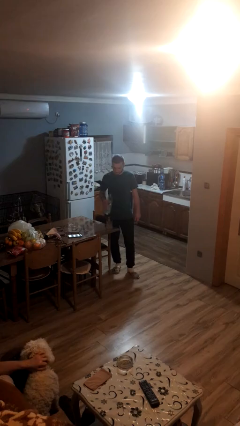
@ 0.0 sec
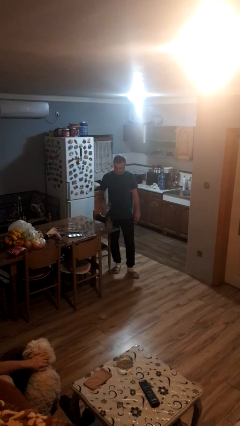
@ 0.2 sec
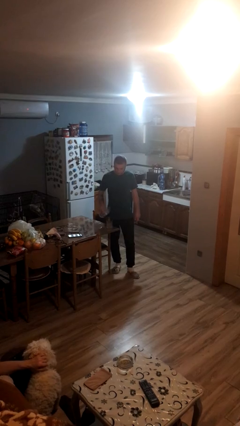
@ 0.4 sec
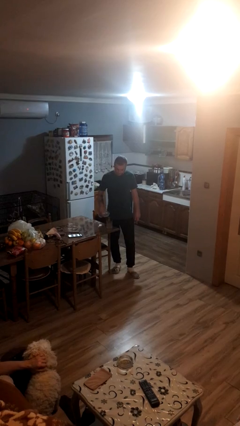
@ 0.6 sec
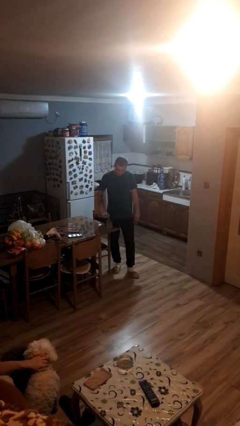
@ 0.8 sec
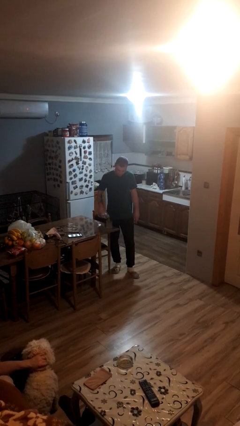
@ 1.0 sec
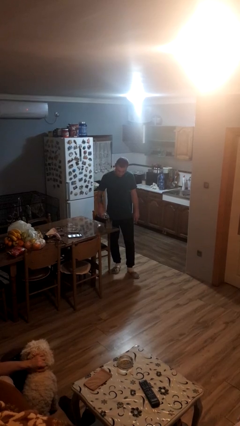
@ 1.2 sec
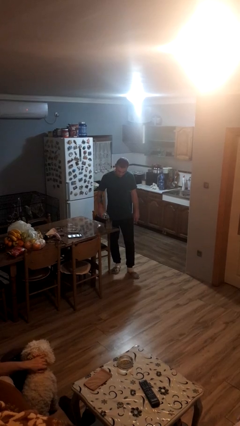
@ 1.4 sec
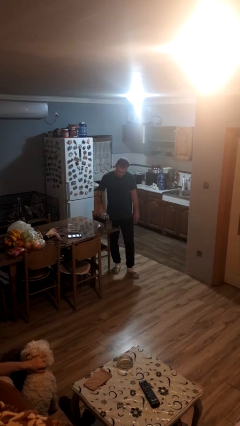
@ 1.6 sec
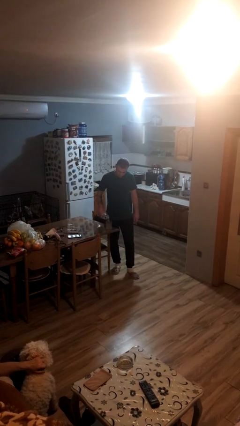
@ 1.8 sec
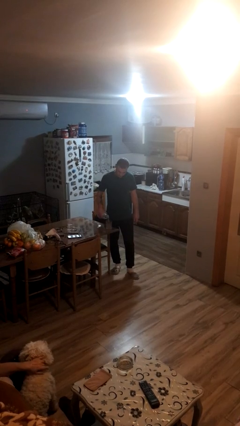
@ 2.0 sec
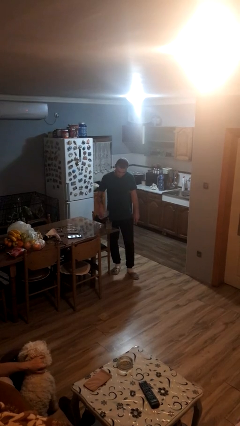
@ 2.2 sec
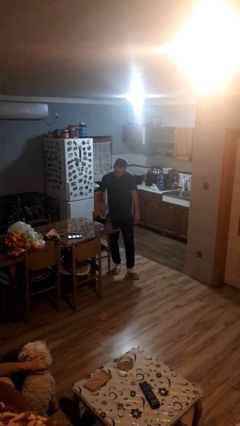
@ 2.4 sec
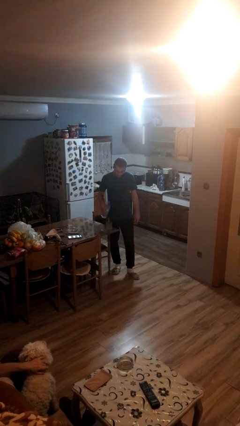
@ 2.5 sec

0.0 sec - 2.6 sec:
person pours liquid into cup

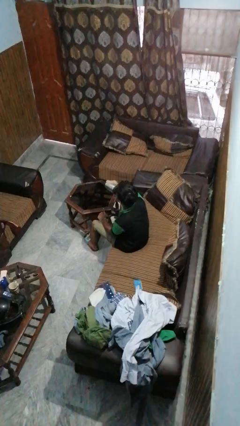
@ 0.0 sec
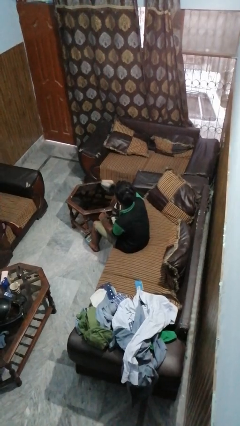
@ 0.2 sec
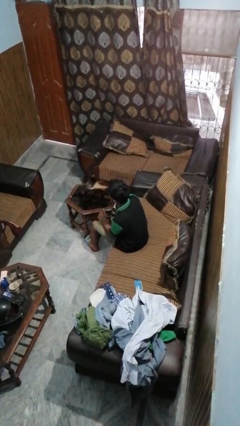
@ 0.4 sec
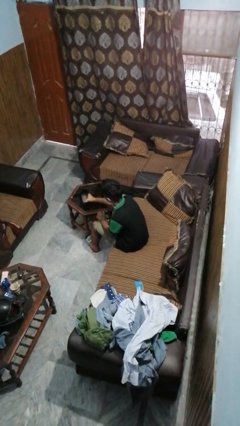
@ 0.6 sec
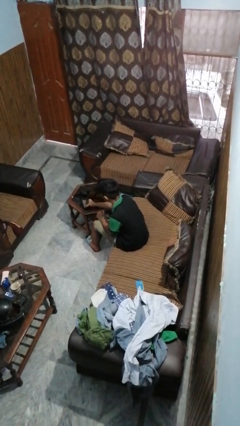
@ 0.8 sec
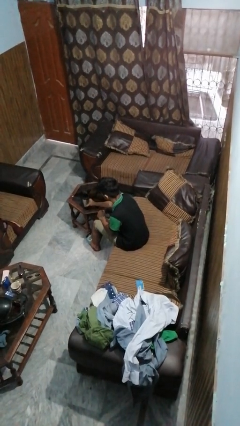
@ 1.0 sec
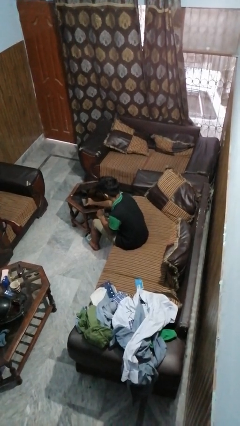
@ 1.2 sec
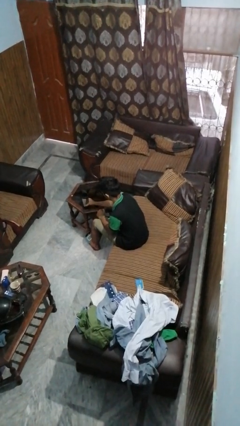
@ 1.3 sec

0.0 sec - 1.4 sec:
person puts down object on table

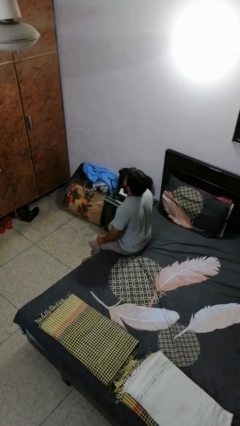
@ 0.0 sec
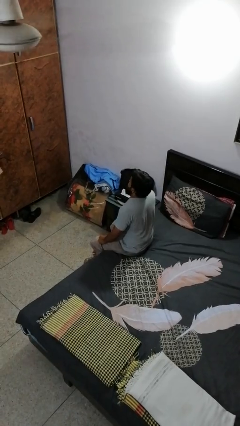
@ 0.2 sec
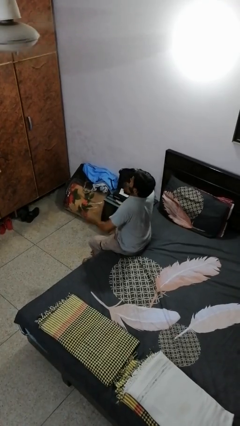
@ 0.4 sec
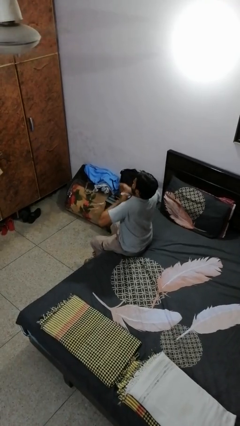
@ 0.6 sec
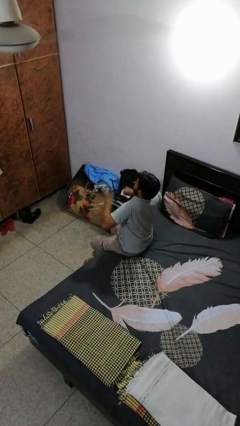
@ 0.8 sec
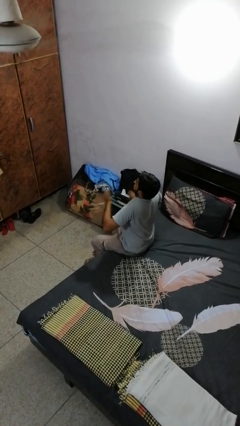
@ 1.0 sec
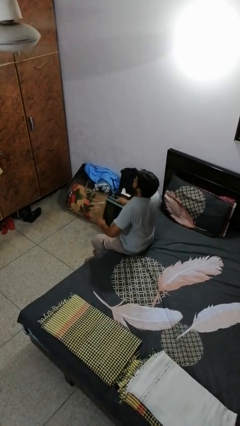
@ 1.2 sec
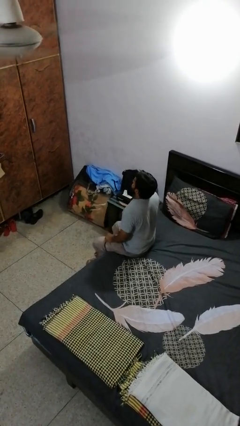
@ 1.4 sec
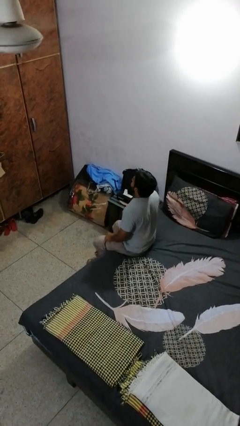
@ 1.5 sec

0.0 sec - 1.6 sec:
person drums on chest

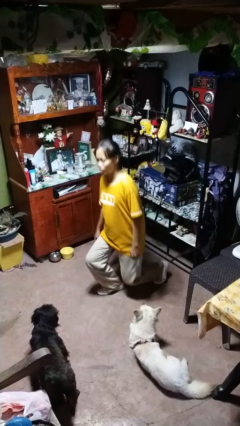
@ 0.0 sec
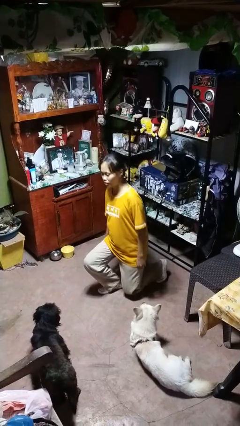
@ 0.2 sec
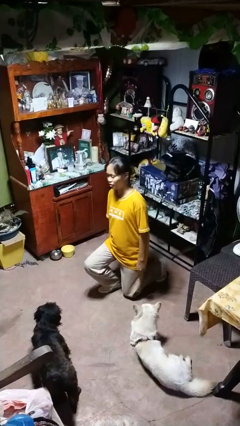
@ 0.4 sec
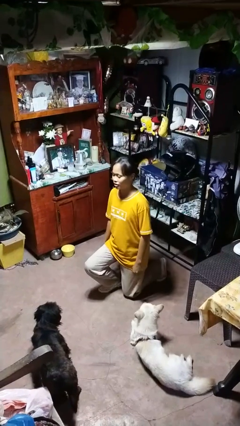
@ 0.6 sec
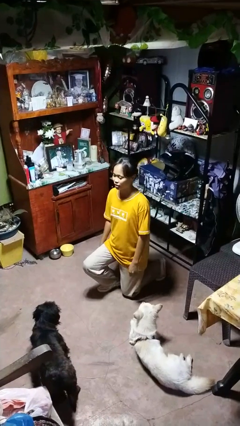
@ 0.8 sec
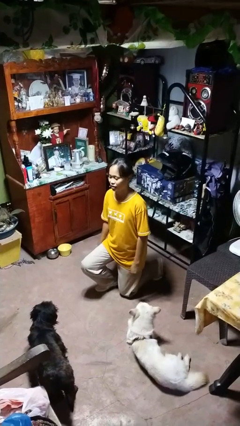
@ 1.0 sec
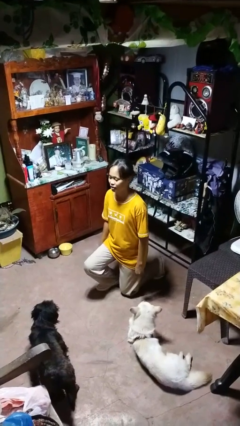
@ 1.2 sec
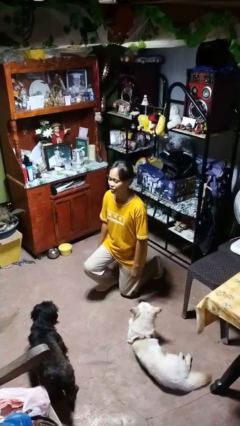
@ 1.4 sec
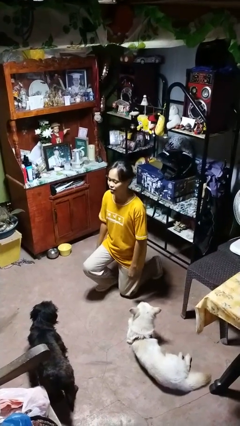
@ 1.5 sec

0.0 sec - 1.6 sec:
person kneels

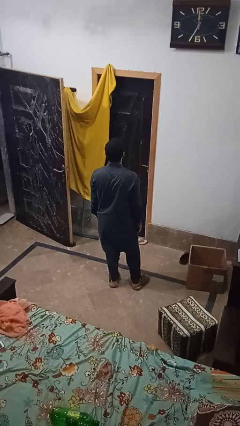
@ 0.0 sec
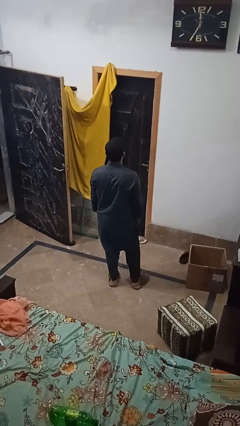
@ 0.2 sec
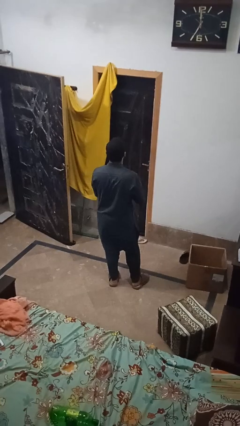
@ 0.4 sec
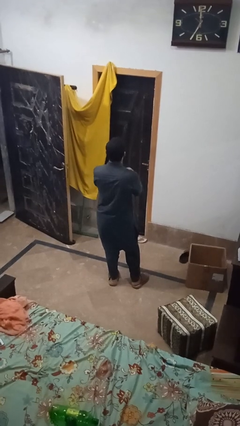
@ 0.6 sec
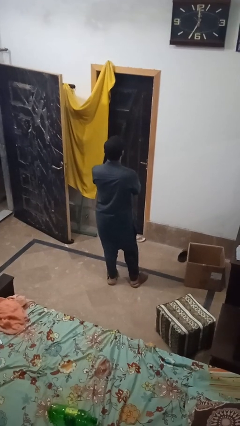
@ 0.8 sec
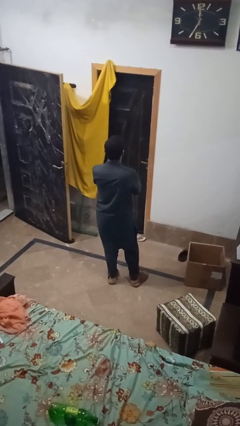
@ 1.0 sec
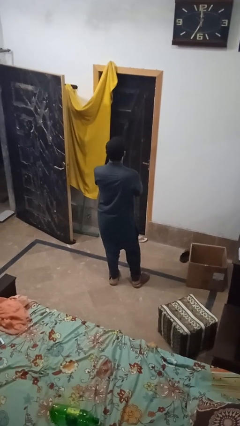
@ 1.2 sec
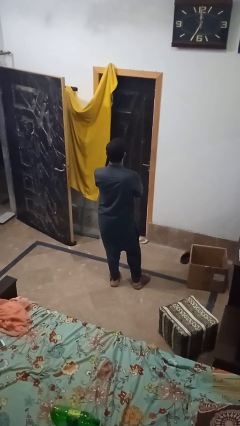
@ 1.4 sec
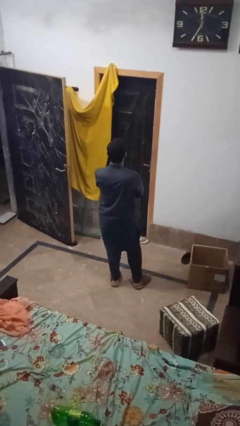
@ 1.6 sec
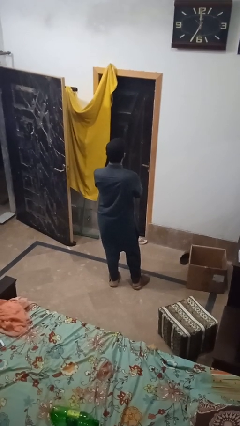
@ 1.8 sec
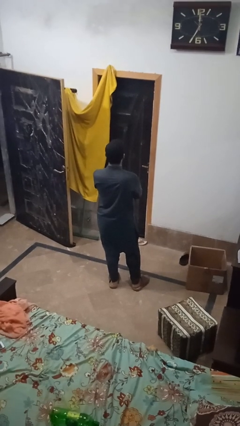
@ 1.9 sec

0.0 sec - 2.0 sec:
person gestures arms x

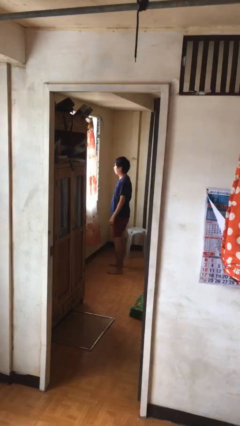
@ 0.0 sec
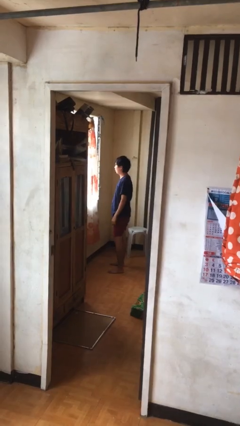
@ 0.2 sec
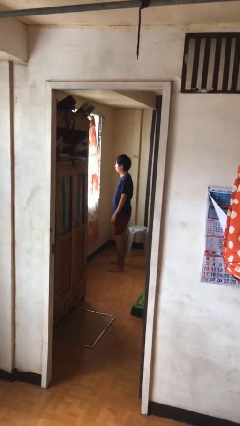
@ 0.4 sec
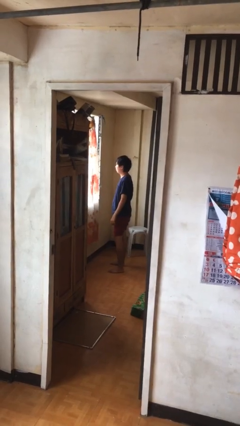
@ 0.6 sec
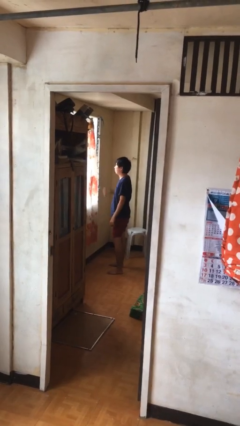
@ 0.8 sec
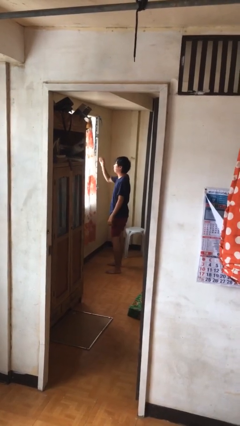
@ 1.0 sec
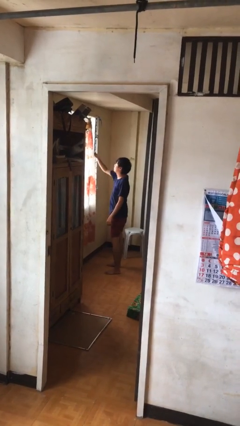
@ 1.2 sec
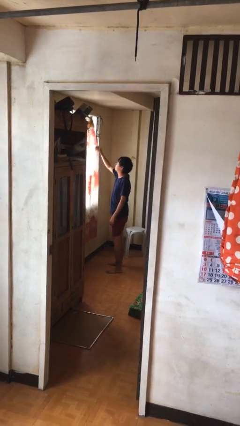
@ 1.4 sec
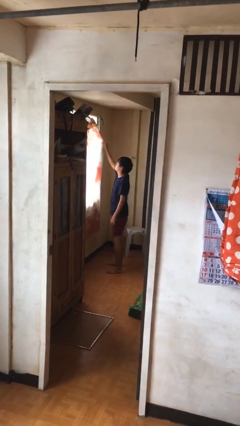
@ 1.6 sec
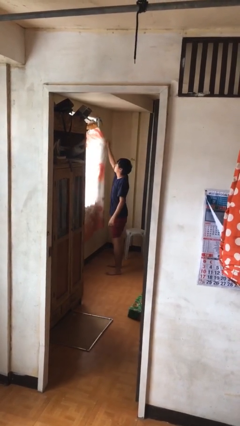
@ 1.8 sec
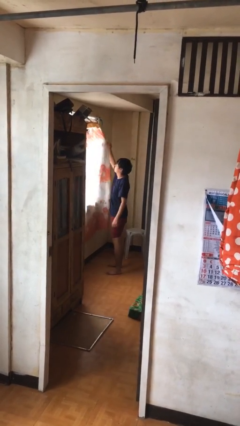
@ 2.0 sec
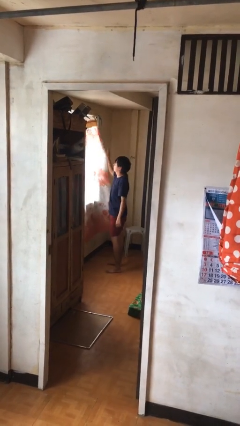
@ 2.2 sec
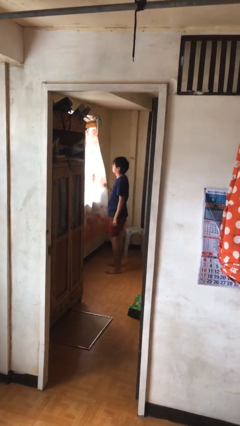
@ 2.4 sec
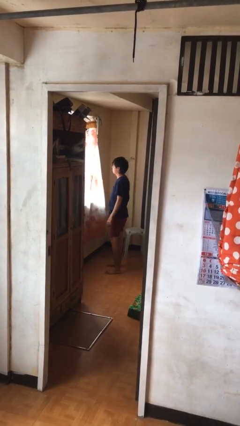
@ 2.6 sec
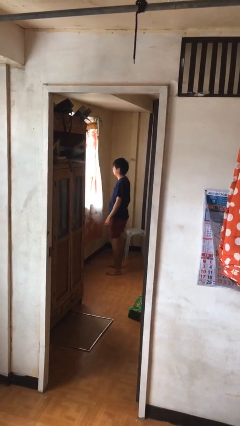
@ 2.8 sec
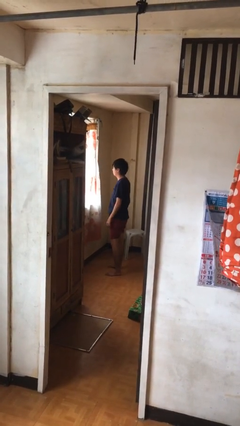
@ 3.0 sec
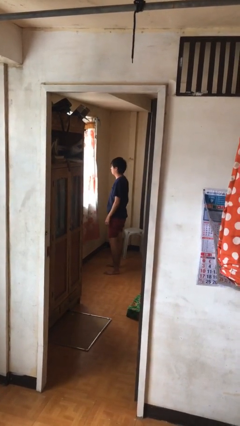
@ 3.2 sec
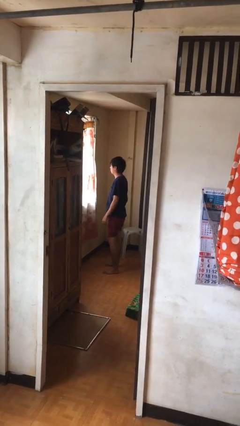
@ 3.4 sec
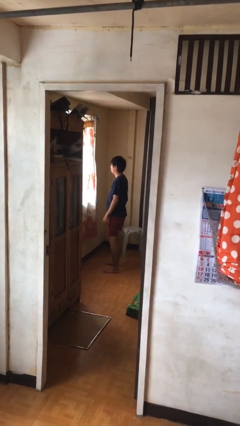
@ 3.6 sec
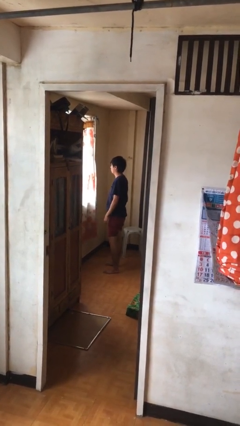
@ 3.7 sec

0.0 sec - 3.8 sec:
person closes curtains

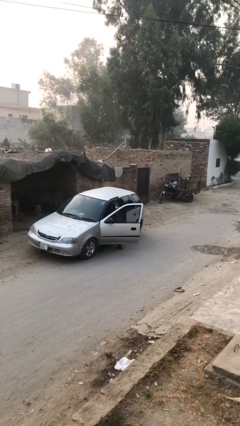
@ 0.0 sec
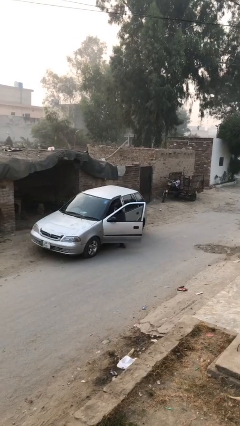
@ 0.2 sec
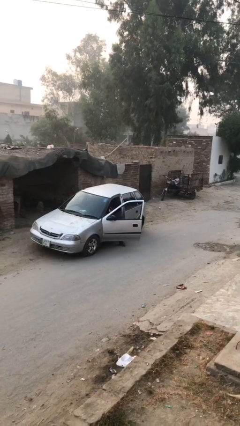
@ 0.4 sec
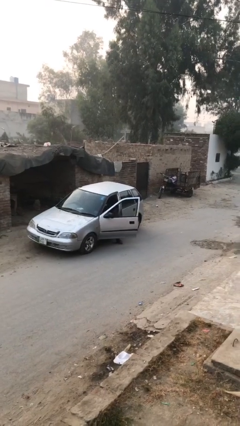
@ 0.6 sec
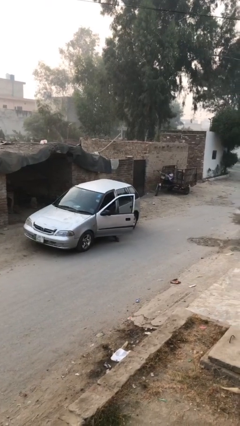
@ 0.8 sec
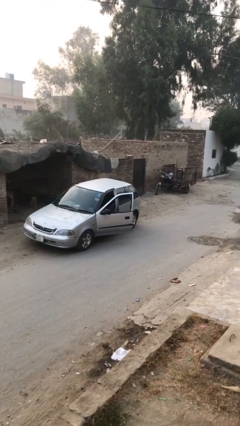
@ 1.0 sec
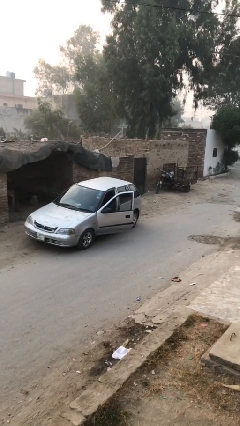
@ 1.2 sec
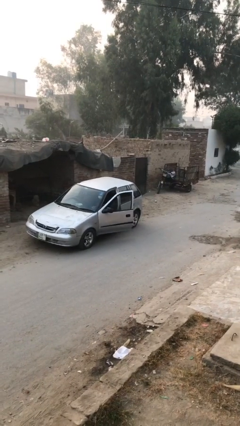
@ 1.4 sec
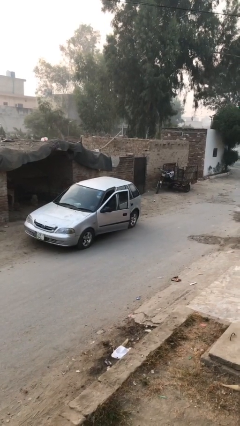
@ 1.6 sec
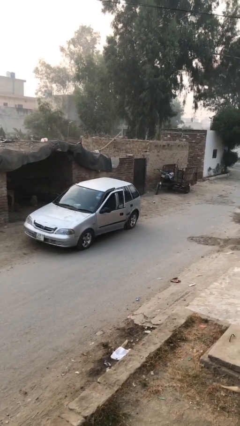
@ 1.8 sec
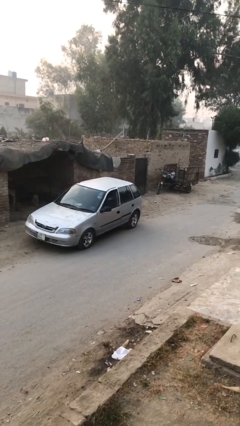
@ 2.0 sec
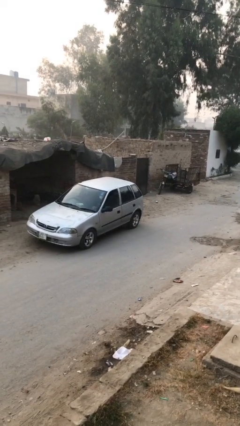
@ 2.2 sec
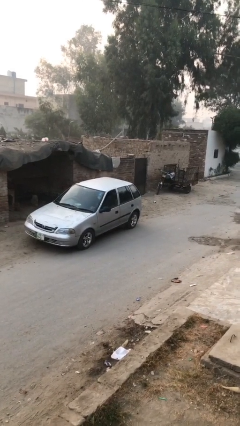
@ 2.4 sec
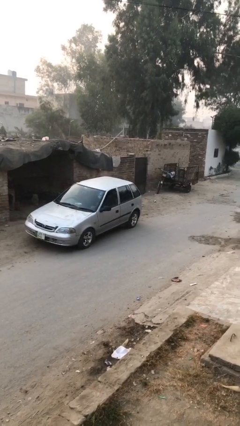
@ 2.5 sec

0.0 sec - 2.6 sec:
person closes car door

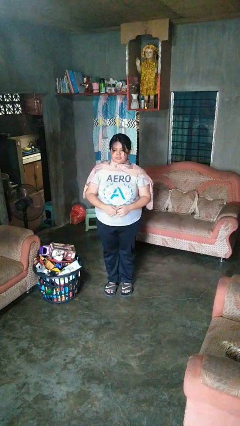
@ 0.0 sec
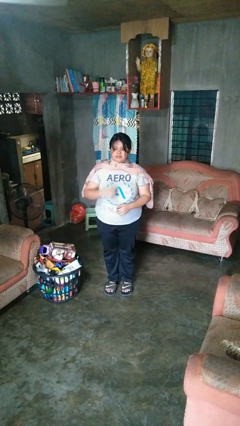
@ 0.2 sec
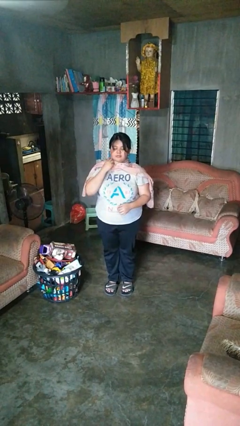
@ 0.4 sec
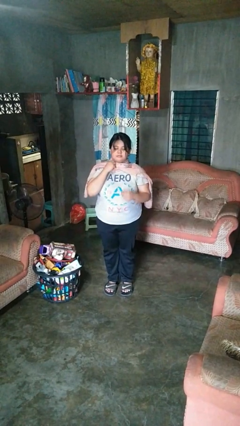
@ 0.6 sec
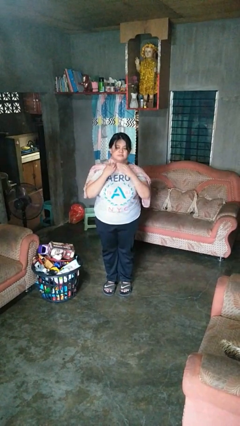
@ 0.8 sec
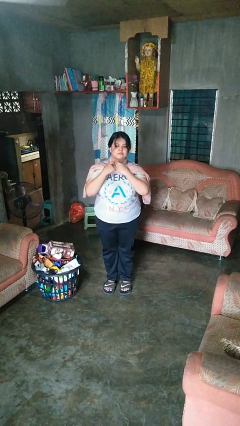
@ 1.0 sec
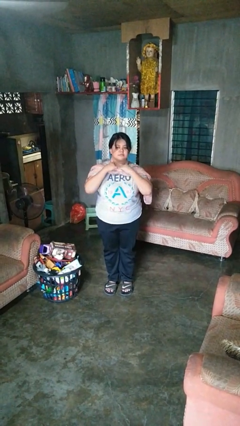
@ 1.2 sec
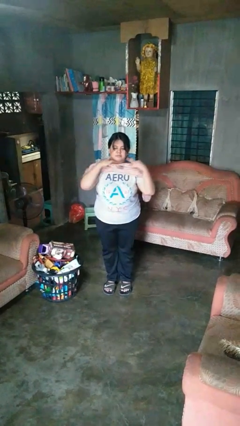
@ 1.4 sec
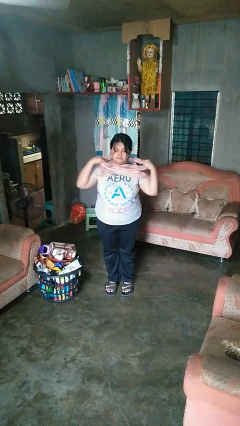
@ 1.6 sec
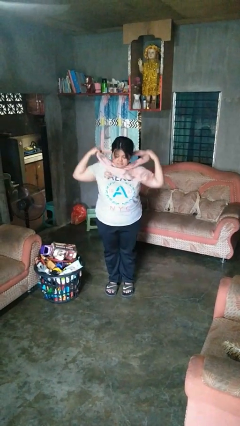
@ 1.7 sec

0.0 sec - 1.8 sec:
person takes off scarf
